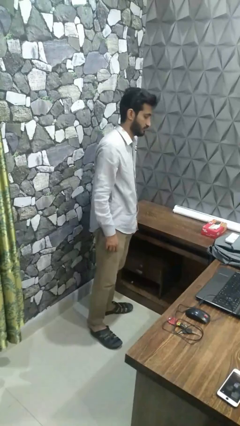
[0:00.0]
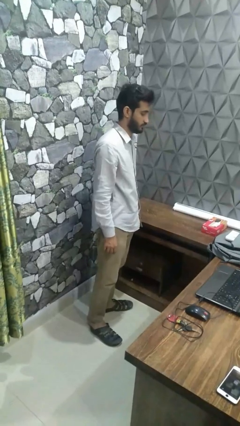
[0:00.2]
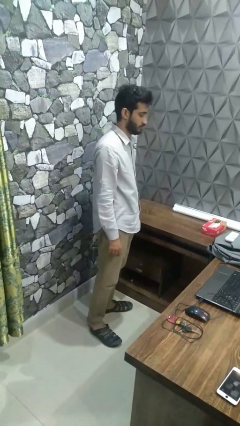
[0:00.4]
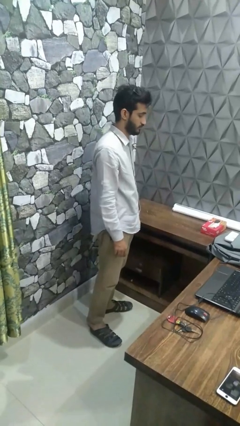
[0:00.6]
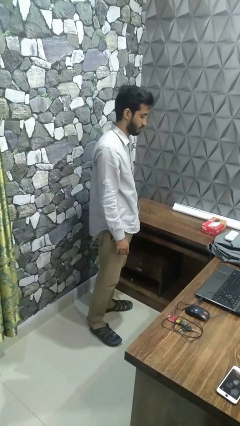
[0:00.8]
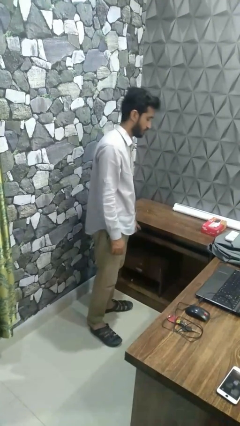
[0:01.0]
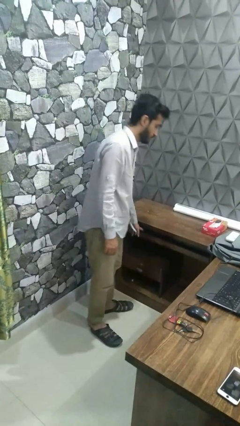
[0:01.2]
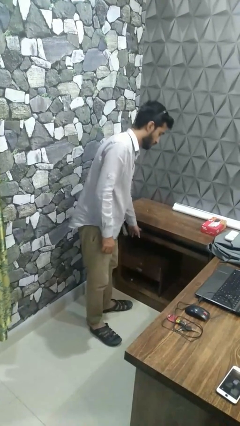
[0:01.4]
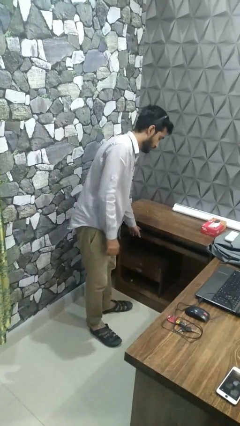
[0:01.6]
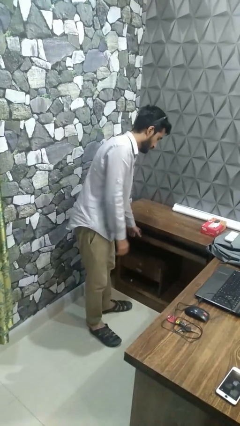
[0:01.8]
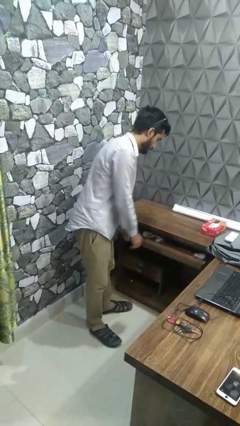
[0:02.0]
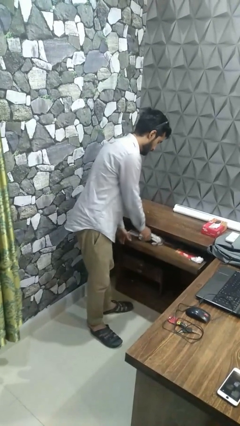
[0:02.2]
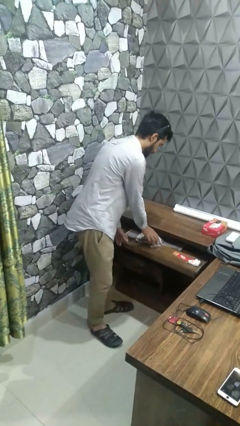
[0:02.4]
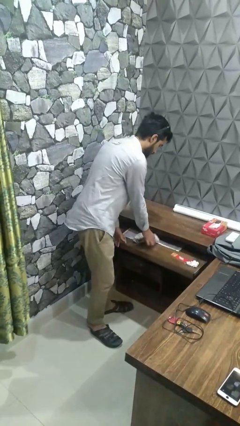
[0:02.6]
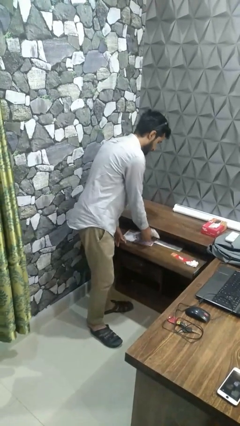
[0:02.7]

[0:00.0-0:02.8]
person takes clothes from dresser

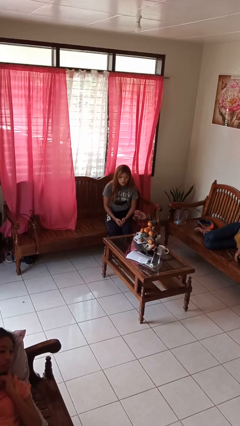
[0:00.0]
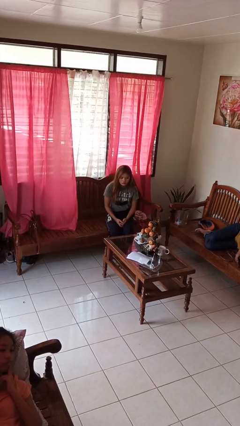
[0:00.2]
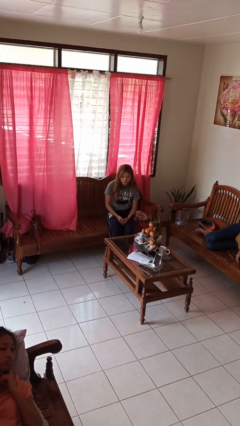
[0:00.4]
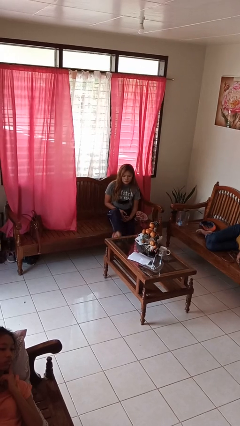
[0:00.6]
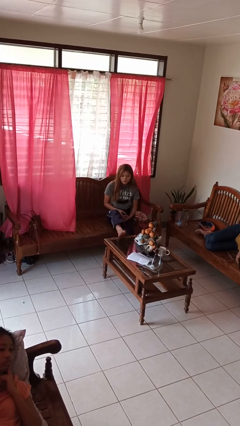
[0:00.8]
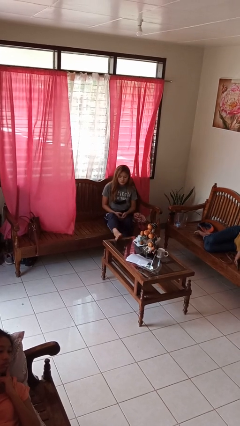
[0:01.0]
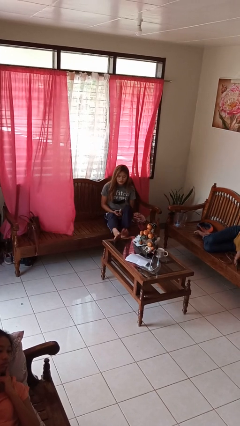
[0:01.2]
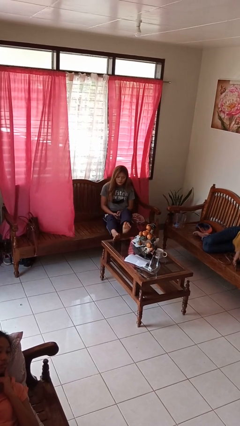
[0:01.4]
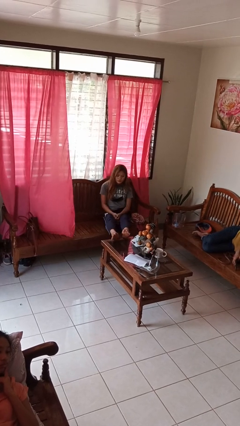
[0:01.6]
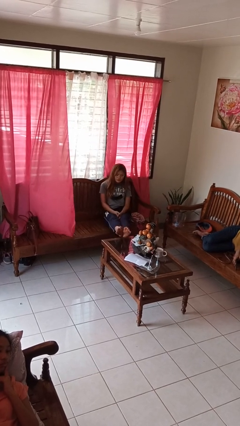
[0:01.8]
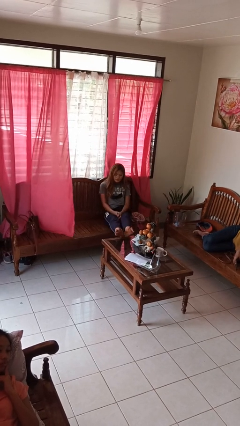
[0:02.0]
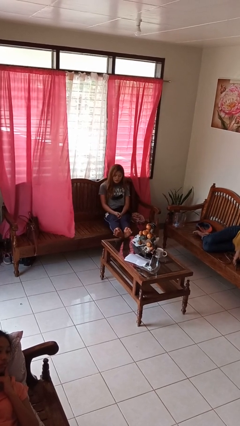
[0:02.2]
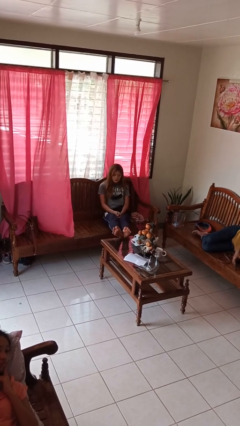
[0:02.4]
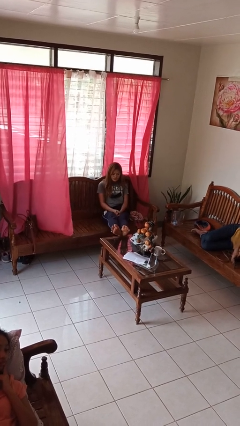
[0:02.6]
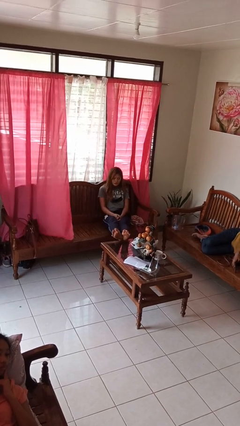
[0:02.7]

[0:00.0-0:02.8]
person puts feet up

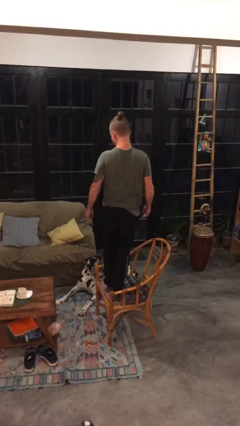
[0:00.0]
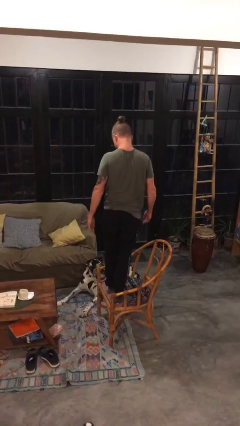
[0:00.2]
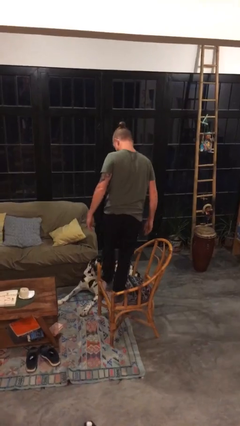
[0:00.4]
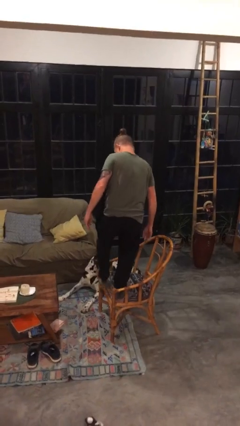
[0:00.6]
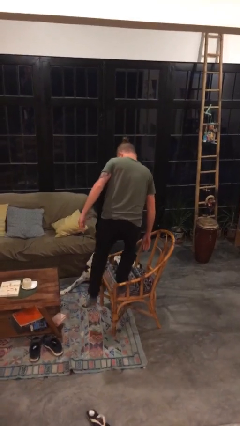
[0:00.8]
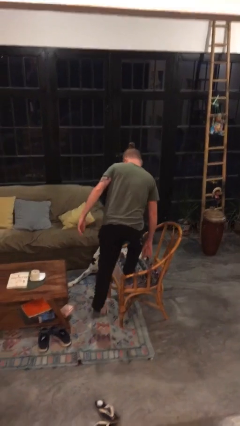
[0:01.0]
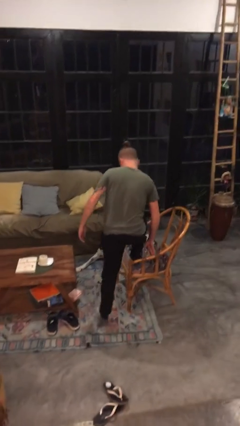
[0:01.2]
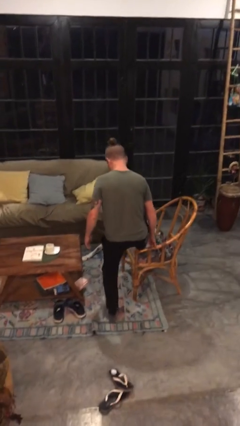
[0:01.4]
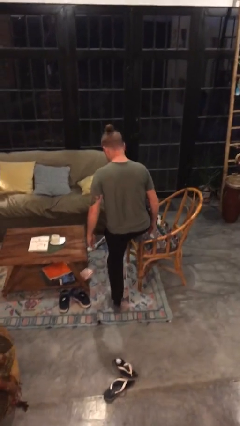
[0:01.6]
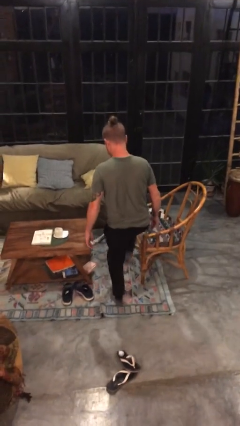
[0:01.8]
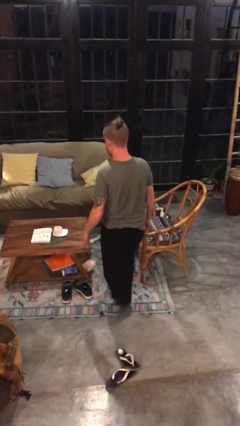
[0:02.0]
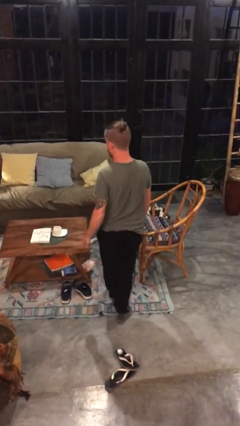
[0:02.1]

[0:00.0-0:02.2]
person climbs off chair

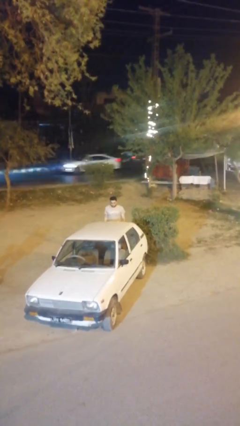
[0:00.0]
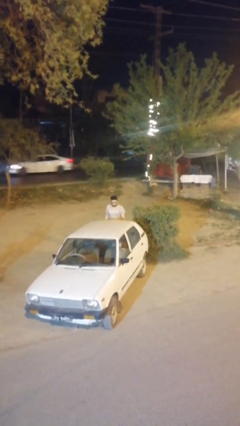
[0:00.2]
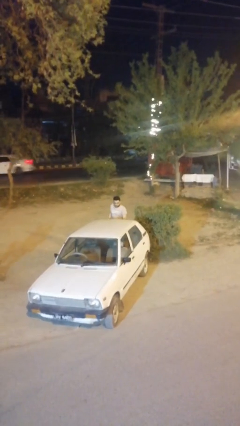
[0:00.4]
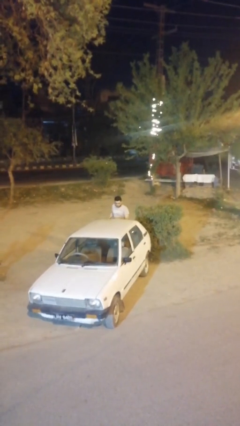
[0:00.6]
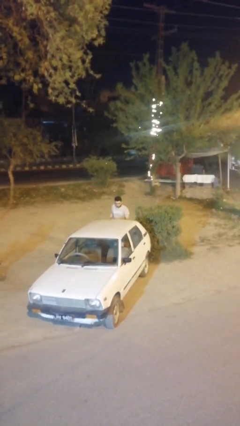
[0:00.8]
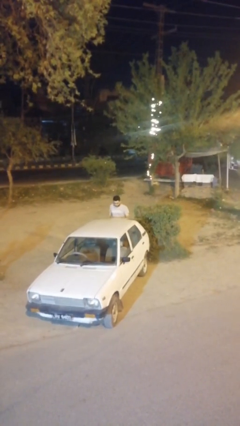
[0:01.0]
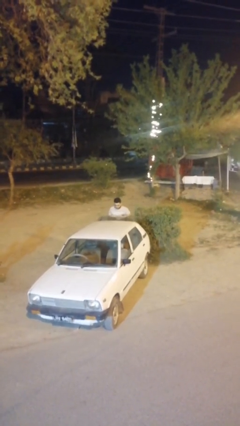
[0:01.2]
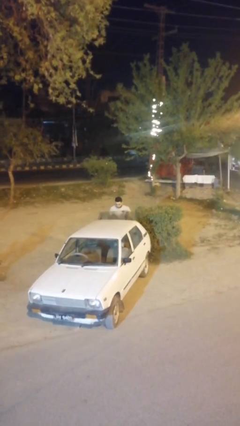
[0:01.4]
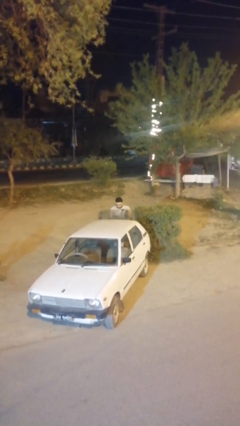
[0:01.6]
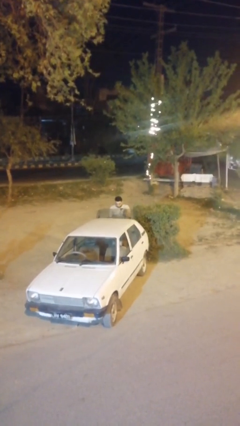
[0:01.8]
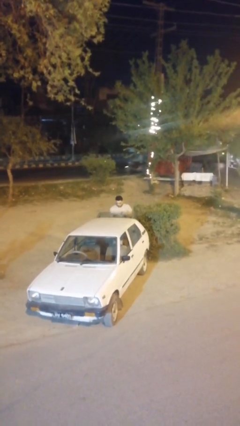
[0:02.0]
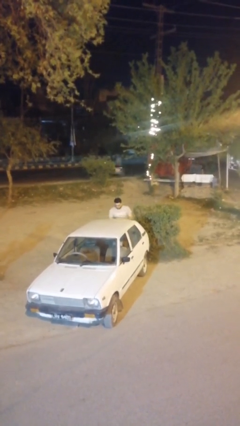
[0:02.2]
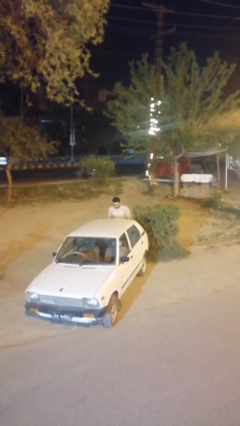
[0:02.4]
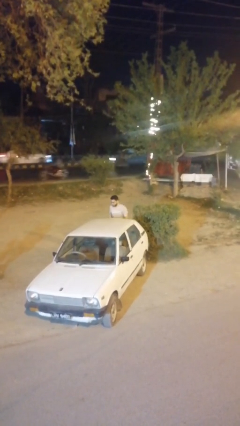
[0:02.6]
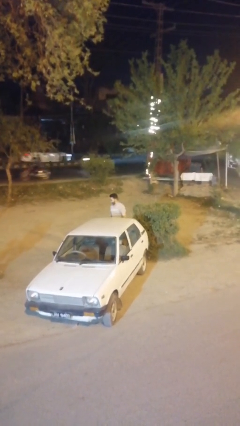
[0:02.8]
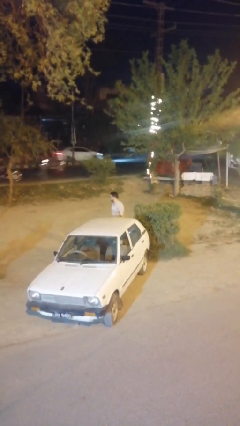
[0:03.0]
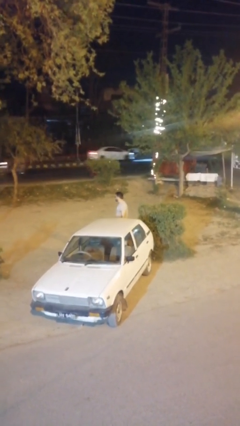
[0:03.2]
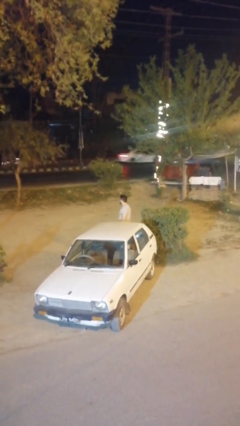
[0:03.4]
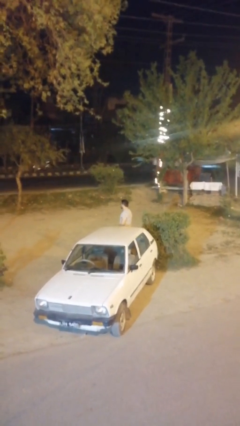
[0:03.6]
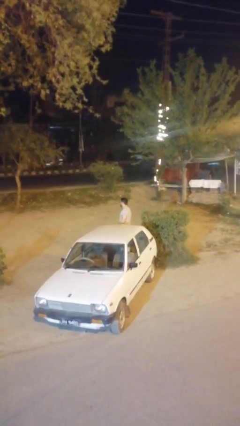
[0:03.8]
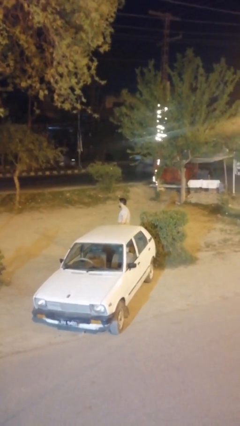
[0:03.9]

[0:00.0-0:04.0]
person loads car

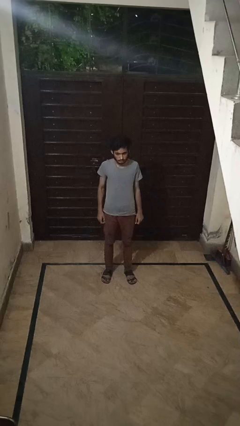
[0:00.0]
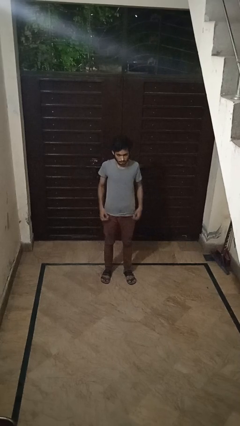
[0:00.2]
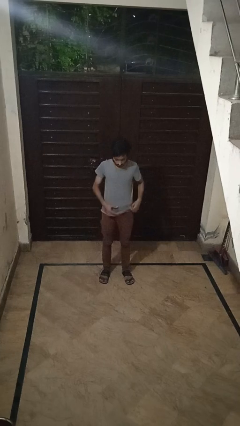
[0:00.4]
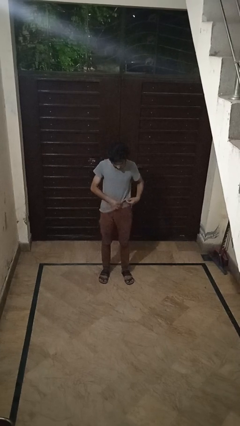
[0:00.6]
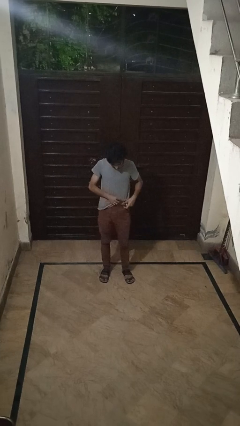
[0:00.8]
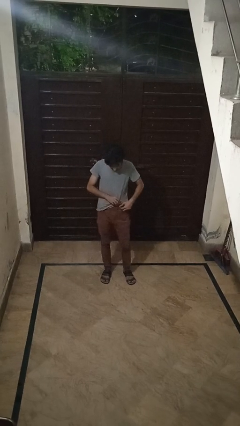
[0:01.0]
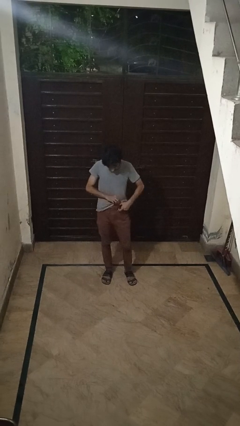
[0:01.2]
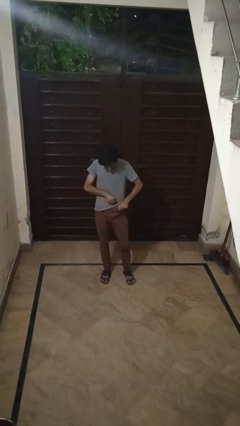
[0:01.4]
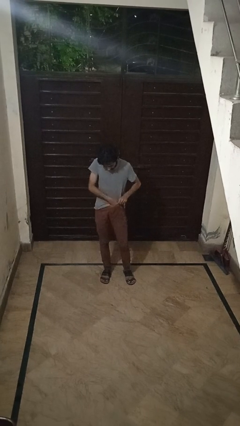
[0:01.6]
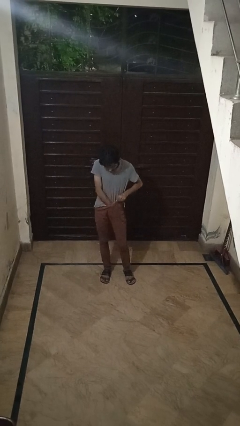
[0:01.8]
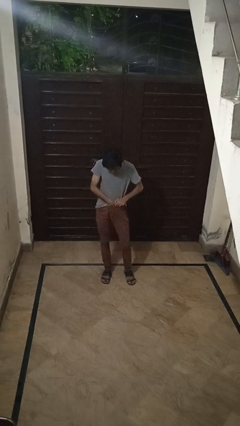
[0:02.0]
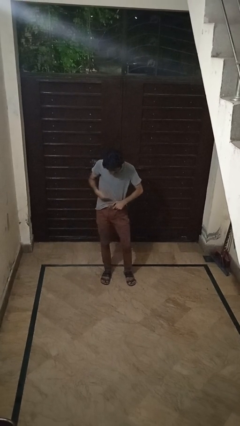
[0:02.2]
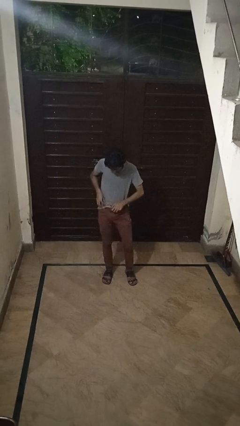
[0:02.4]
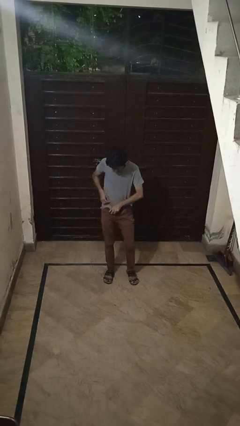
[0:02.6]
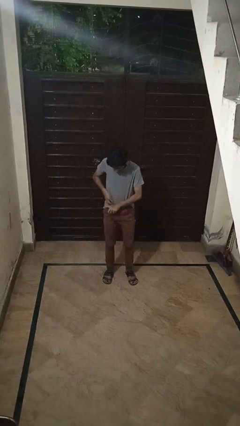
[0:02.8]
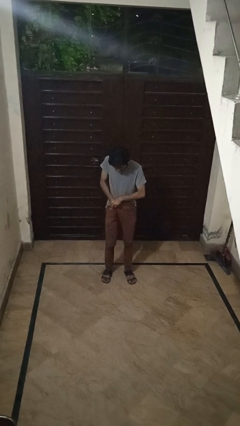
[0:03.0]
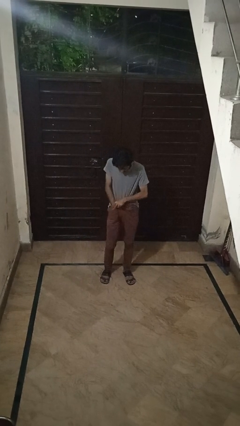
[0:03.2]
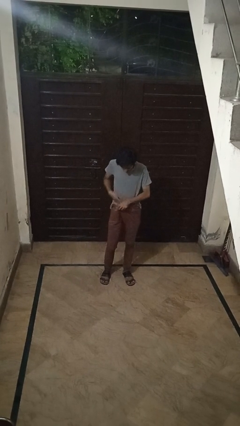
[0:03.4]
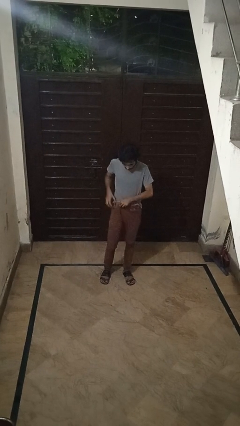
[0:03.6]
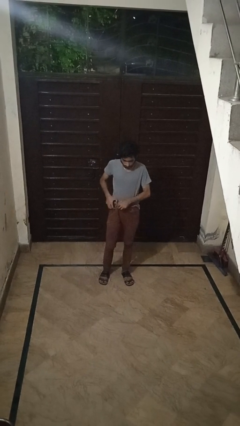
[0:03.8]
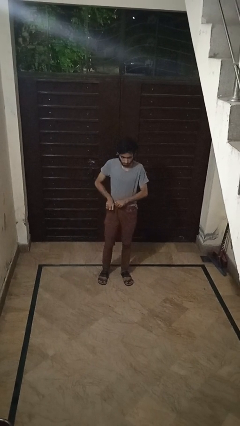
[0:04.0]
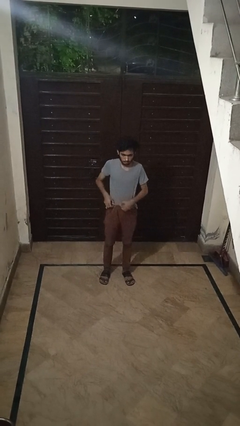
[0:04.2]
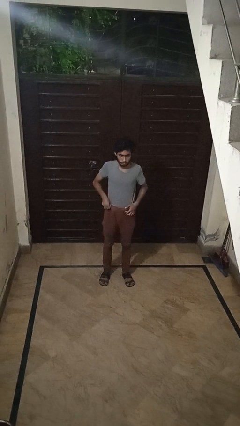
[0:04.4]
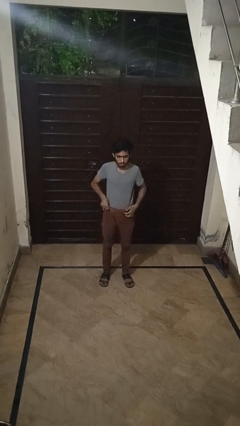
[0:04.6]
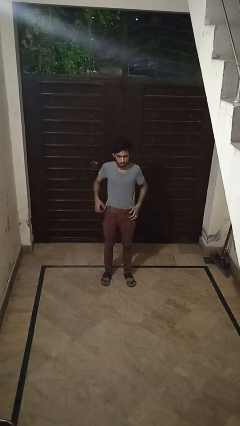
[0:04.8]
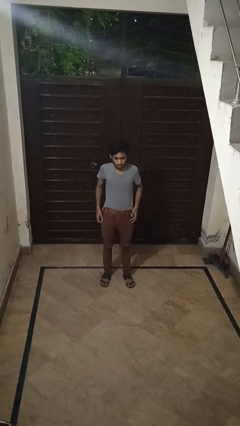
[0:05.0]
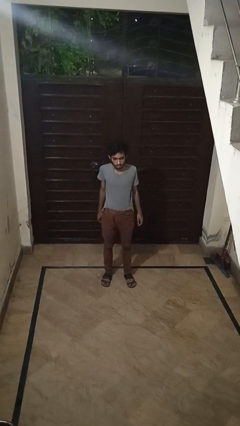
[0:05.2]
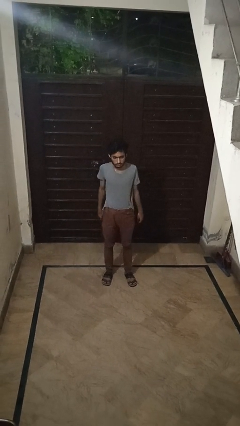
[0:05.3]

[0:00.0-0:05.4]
person tucks in shirt
